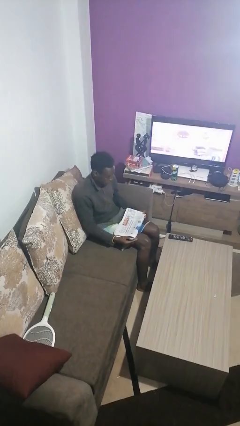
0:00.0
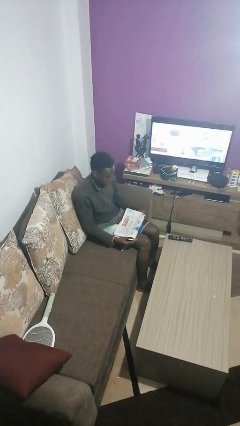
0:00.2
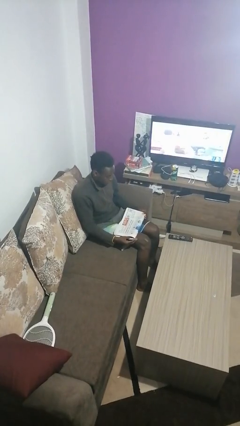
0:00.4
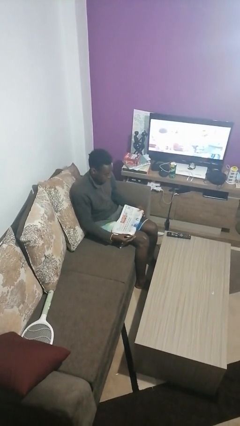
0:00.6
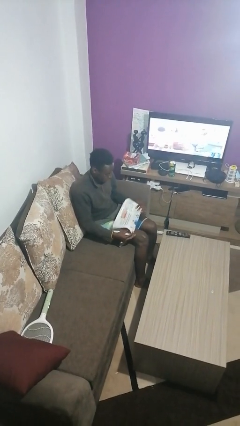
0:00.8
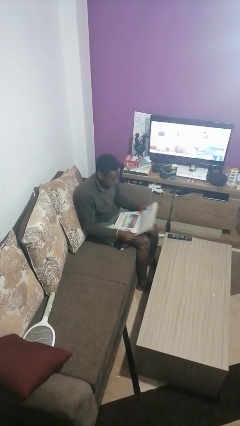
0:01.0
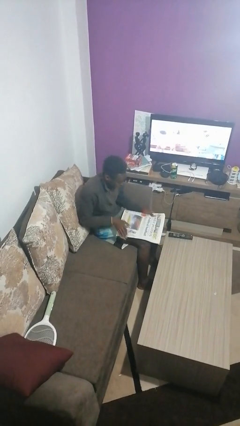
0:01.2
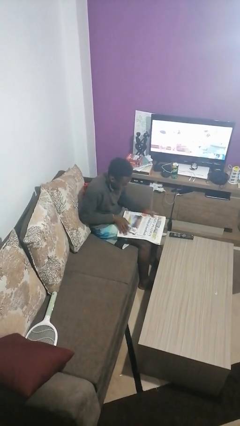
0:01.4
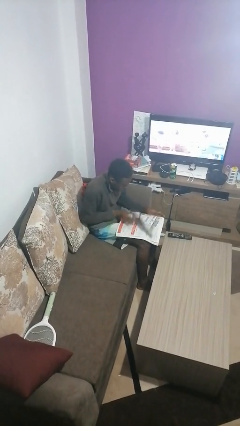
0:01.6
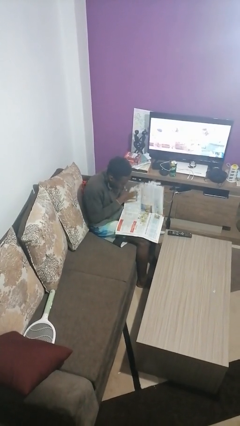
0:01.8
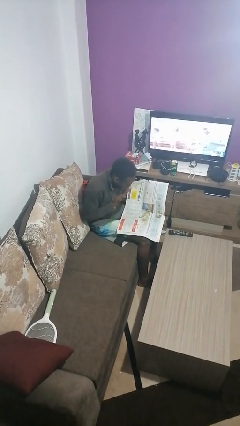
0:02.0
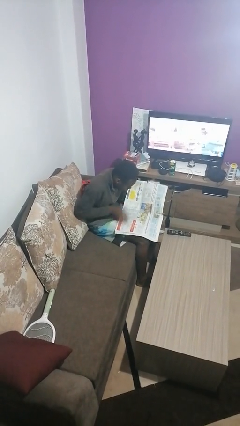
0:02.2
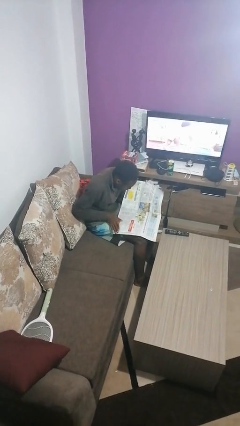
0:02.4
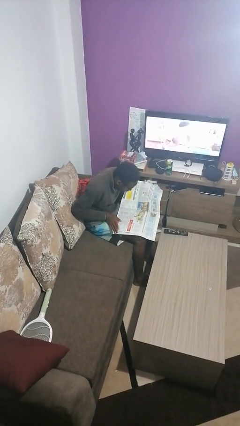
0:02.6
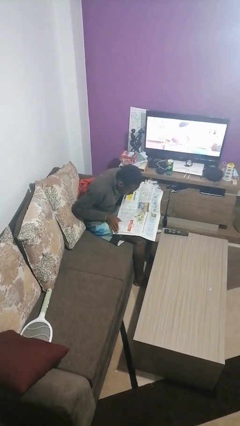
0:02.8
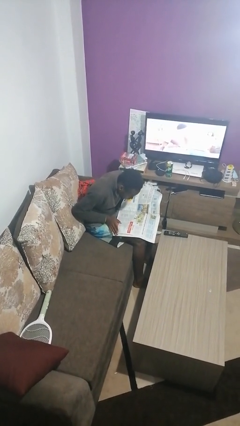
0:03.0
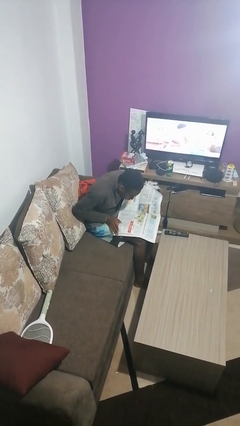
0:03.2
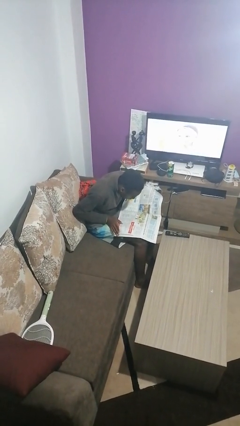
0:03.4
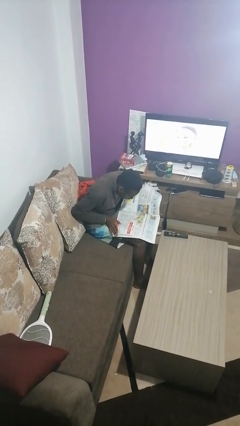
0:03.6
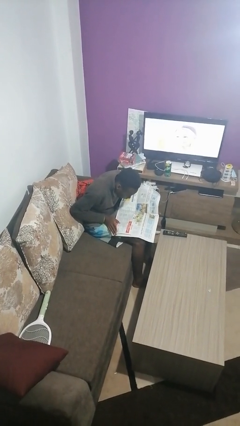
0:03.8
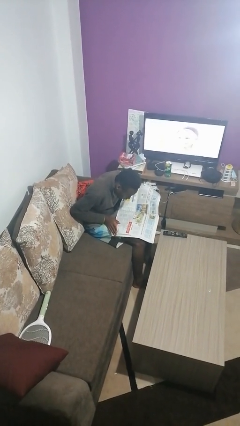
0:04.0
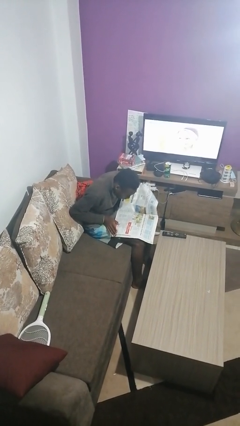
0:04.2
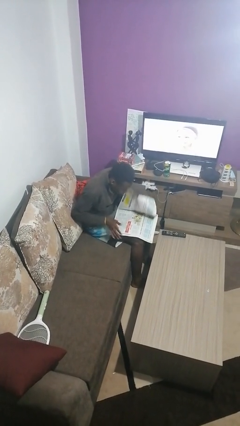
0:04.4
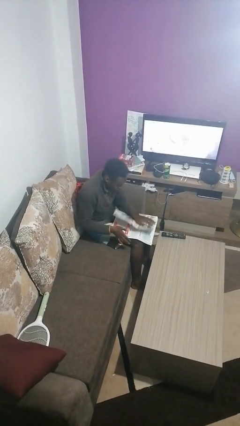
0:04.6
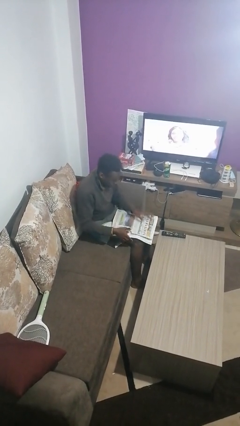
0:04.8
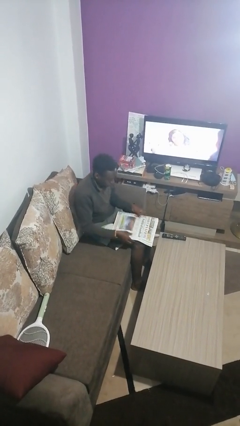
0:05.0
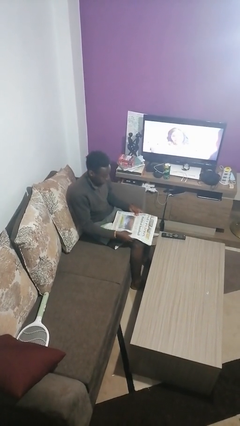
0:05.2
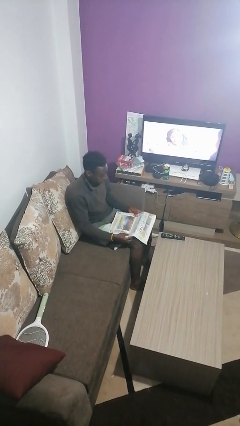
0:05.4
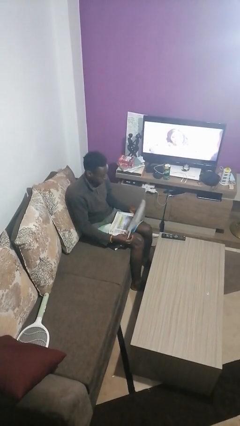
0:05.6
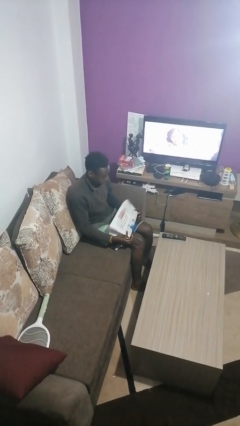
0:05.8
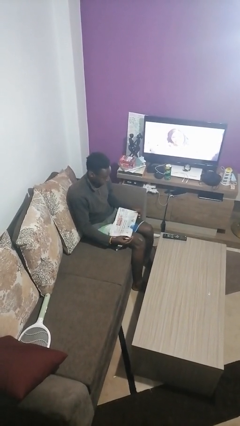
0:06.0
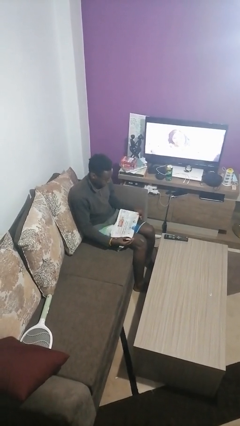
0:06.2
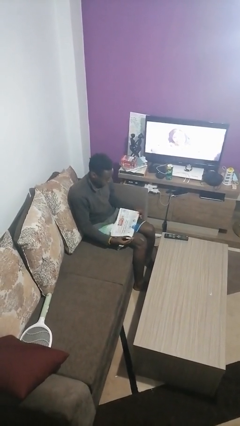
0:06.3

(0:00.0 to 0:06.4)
person reads newspaper

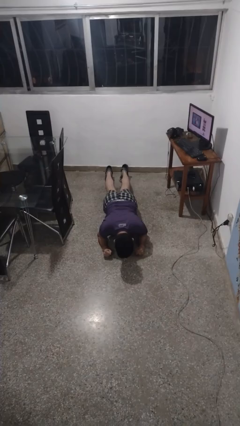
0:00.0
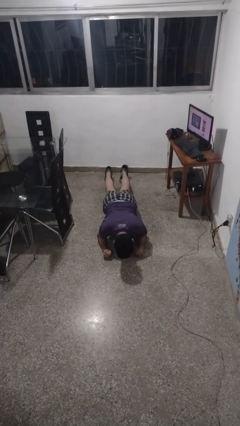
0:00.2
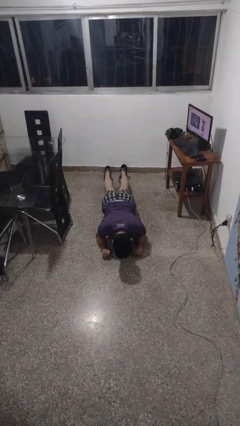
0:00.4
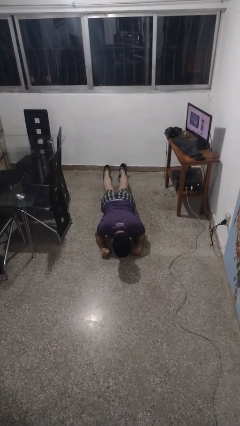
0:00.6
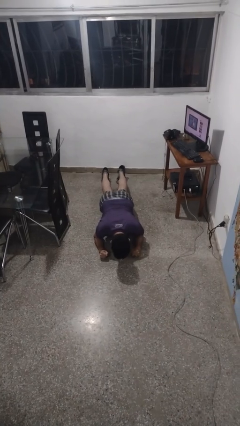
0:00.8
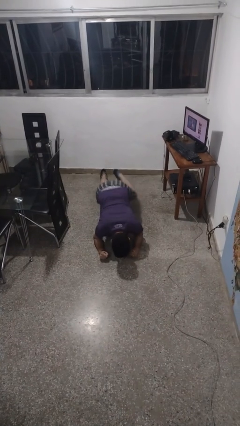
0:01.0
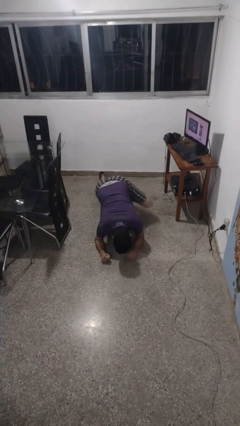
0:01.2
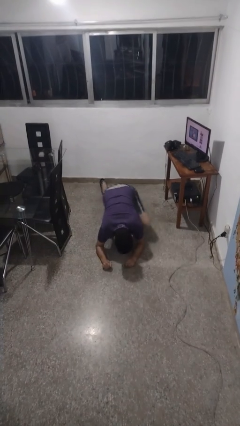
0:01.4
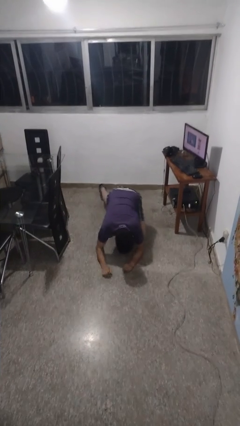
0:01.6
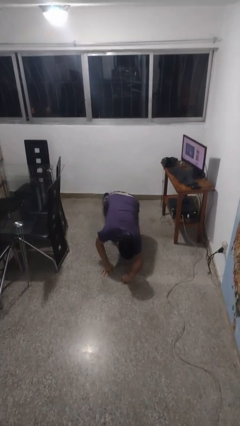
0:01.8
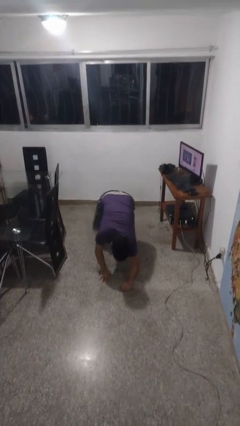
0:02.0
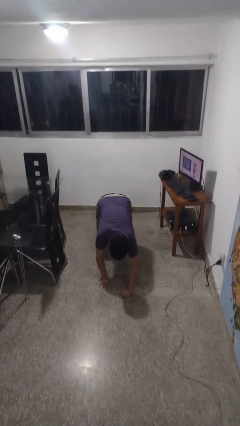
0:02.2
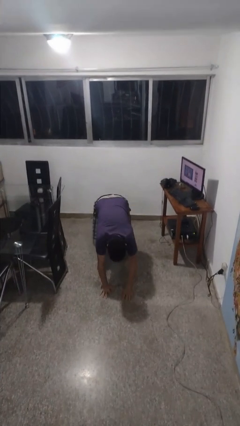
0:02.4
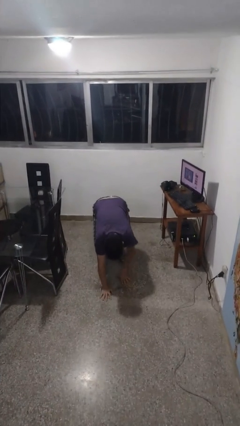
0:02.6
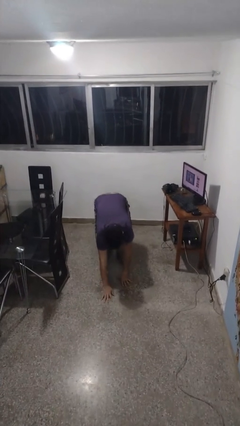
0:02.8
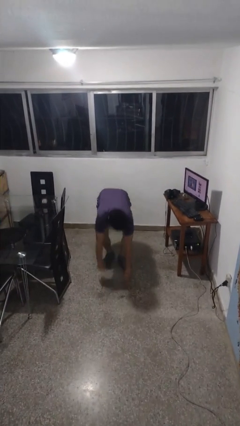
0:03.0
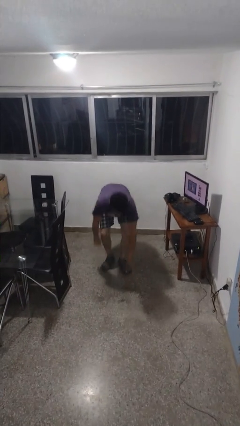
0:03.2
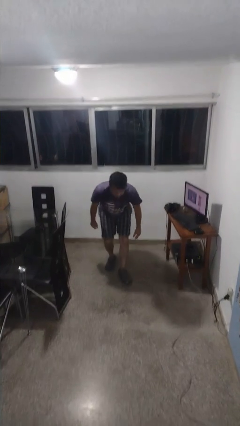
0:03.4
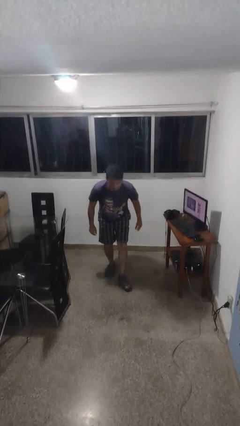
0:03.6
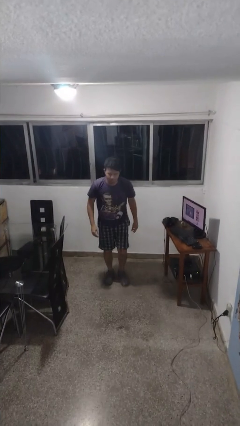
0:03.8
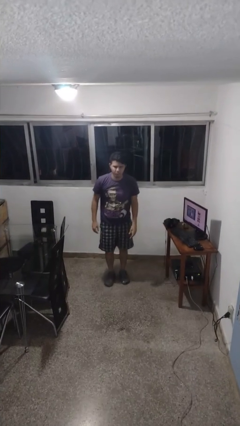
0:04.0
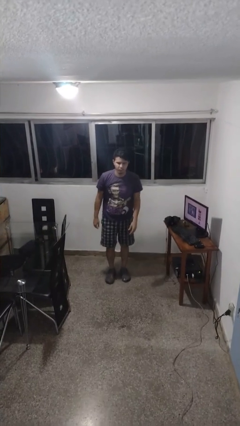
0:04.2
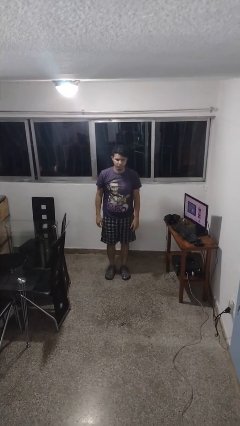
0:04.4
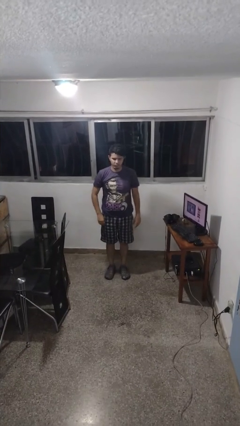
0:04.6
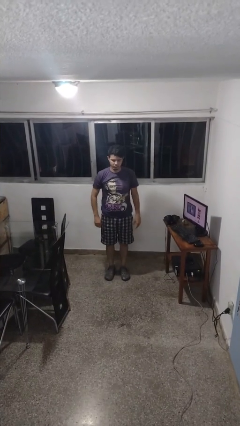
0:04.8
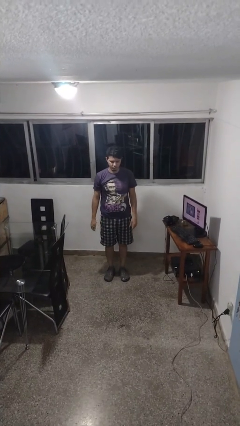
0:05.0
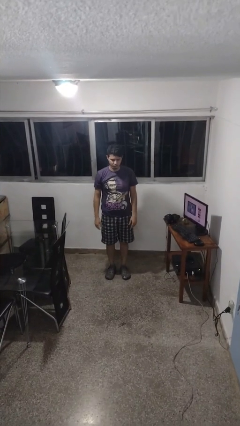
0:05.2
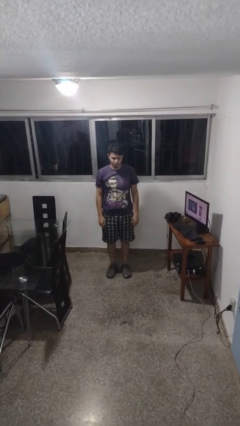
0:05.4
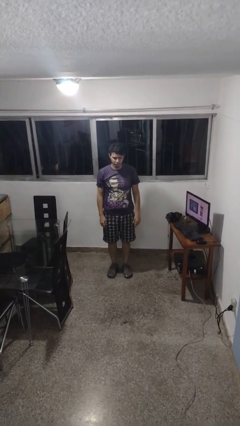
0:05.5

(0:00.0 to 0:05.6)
person stands up from floor

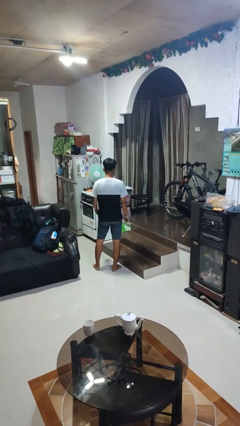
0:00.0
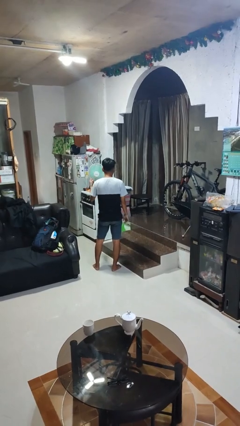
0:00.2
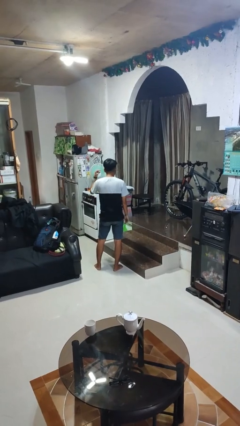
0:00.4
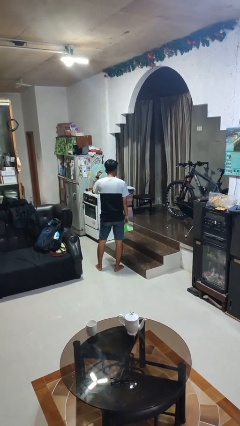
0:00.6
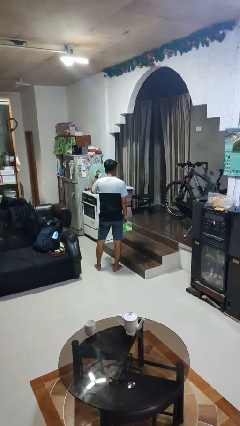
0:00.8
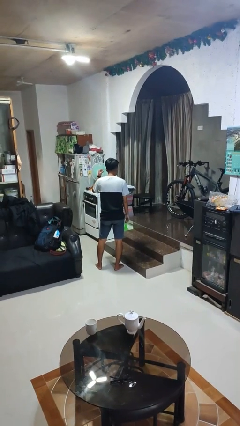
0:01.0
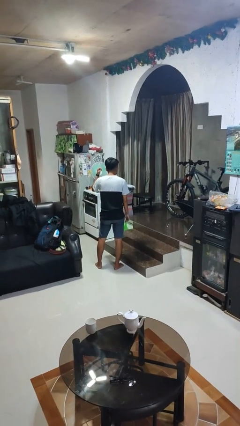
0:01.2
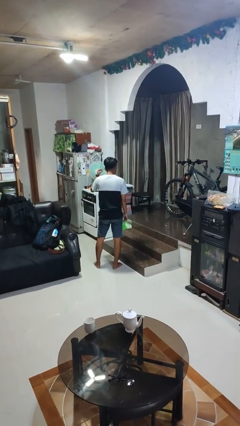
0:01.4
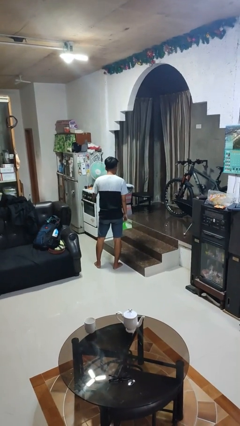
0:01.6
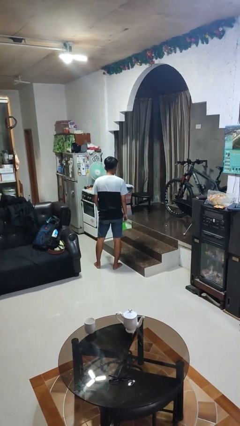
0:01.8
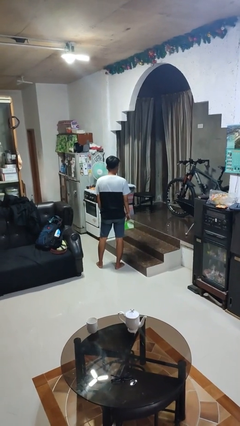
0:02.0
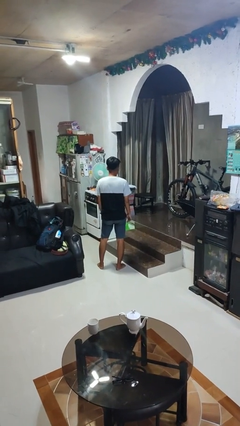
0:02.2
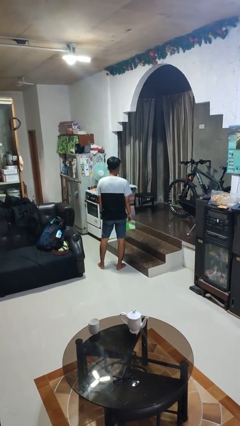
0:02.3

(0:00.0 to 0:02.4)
person gestures listen closely

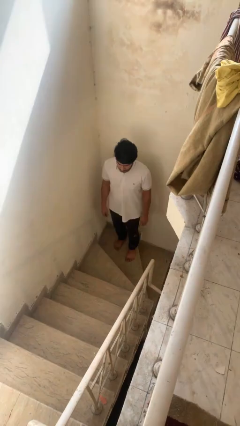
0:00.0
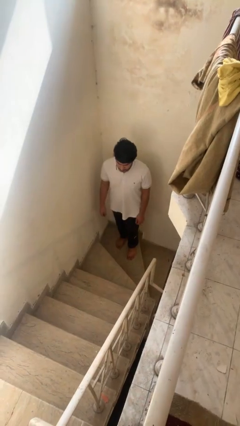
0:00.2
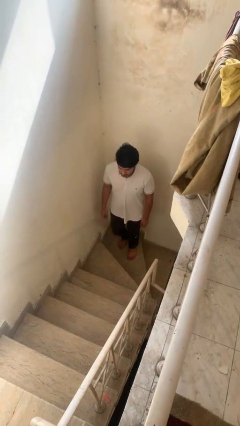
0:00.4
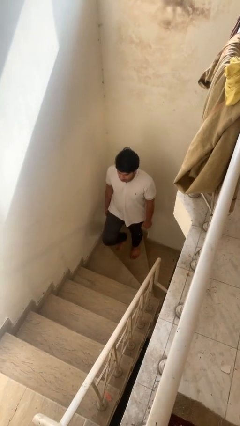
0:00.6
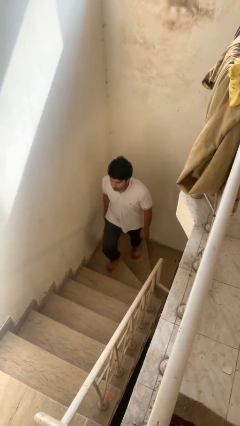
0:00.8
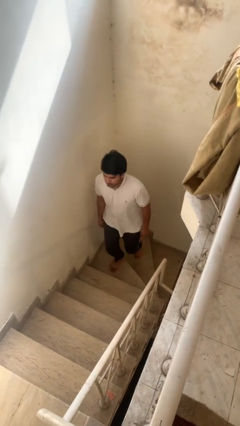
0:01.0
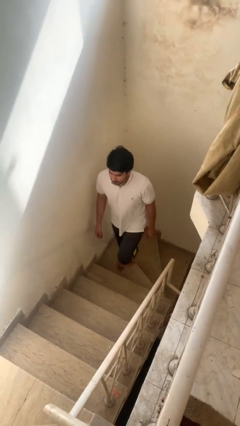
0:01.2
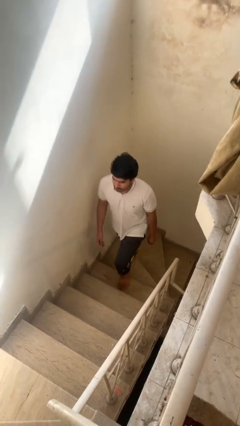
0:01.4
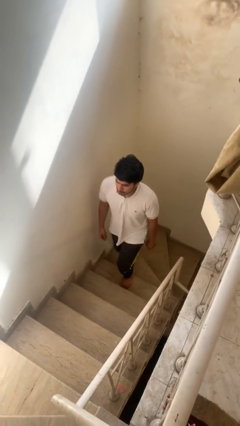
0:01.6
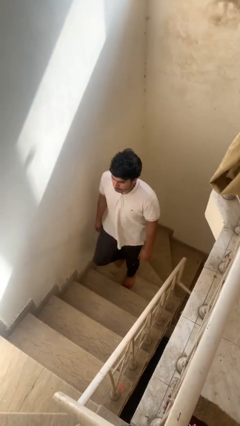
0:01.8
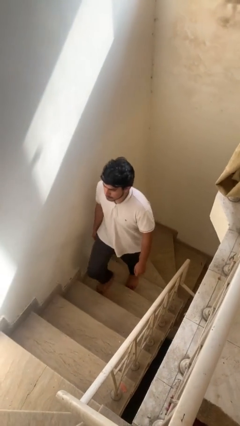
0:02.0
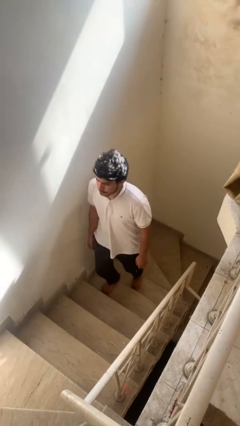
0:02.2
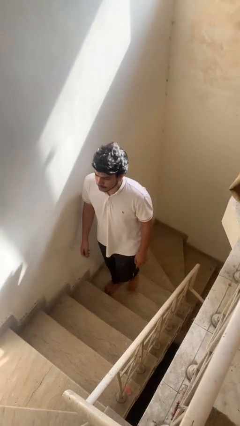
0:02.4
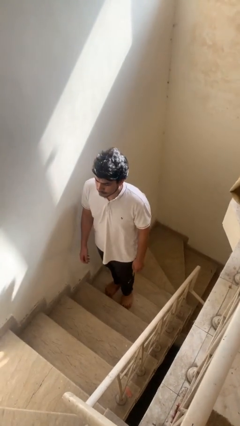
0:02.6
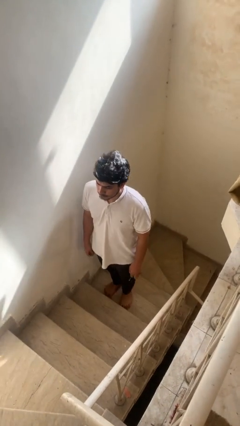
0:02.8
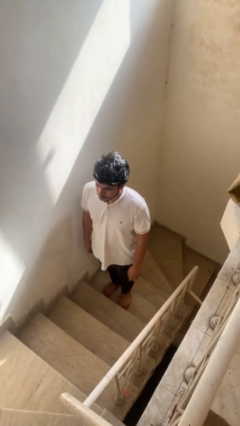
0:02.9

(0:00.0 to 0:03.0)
person climbs up stairs

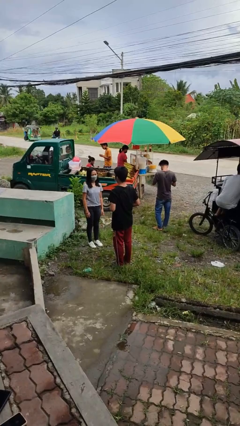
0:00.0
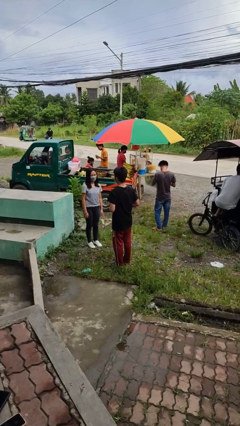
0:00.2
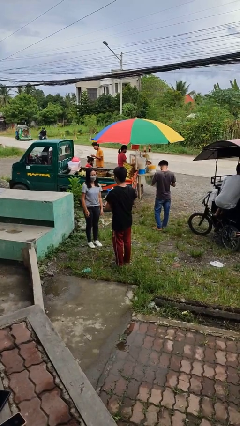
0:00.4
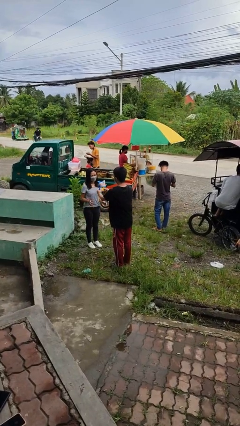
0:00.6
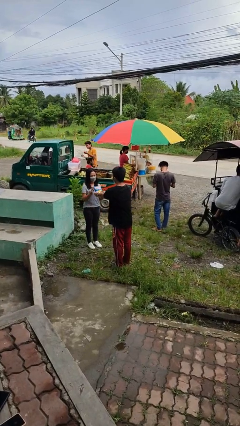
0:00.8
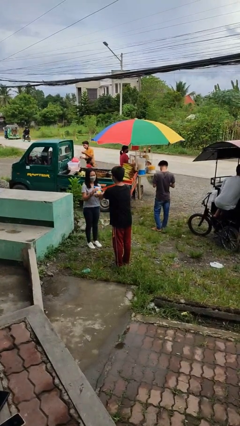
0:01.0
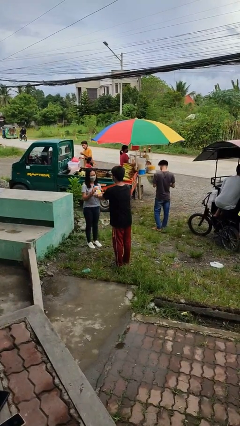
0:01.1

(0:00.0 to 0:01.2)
person transfers object to person
